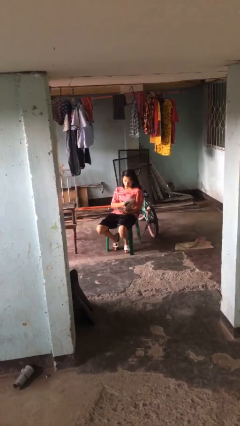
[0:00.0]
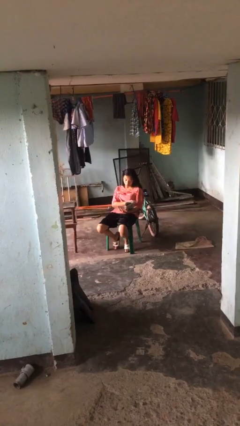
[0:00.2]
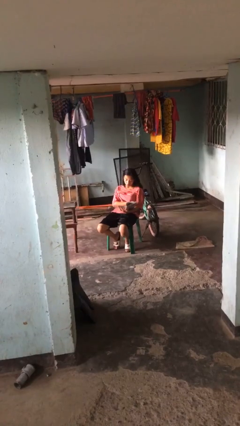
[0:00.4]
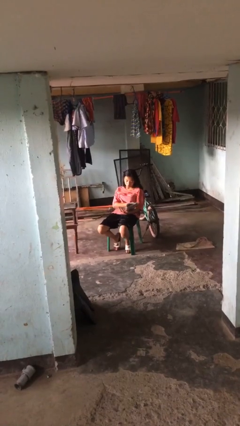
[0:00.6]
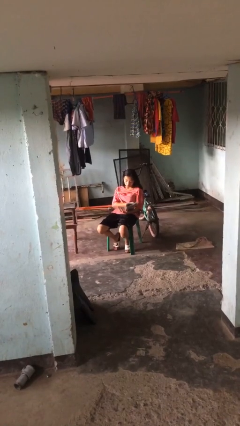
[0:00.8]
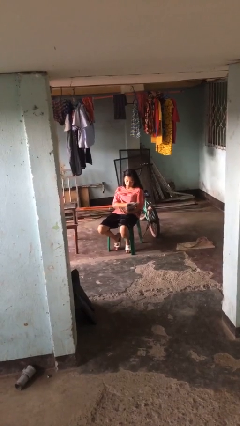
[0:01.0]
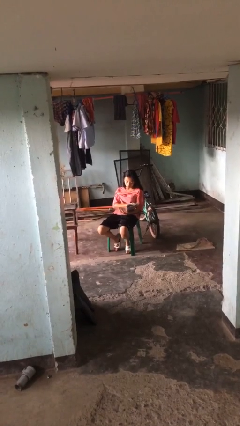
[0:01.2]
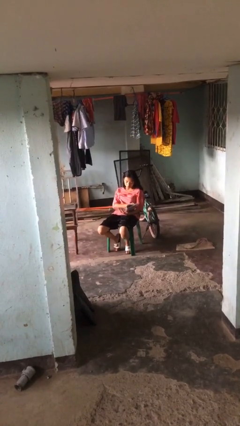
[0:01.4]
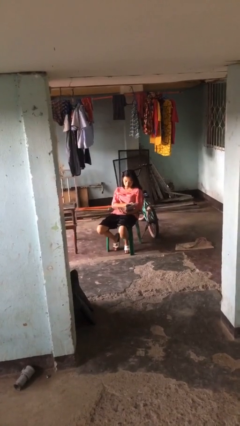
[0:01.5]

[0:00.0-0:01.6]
person reads document

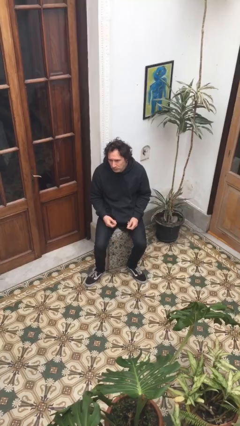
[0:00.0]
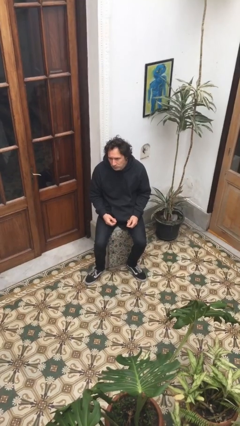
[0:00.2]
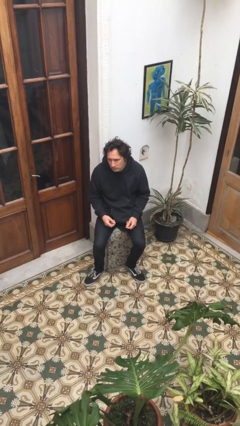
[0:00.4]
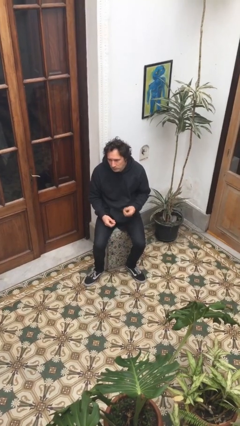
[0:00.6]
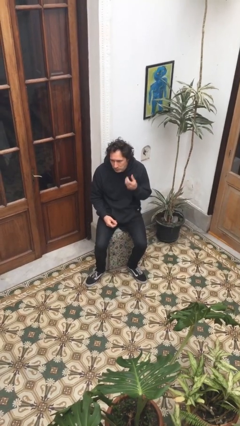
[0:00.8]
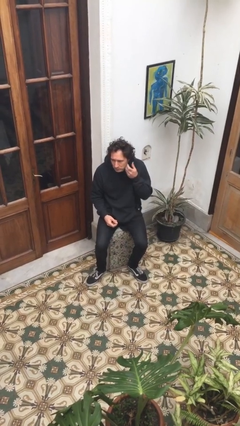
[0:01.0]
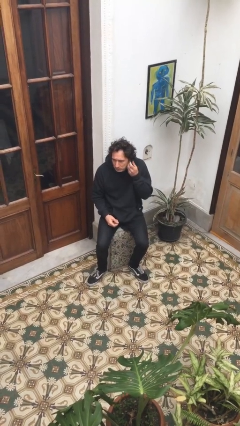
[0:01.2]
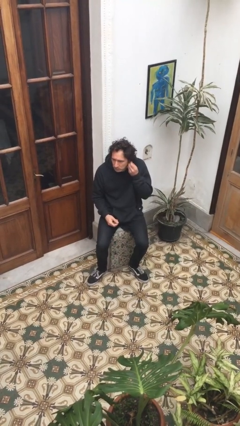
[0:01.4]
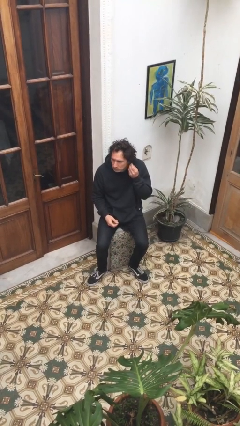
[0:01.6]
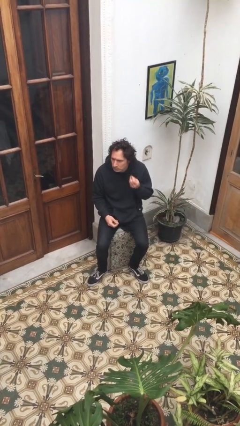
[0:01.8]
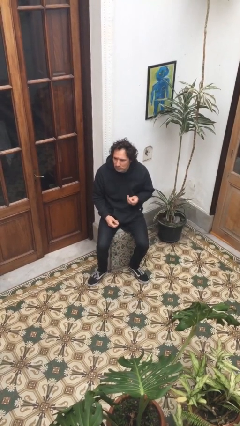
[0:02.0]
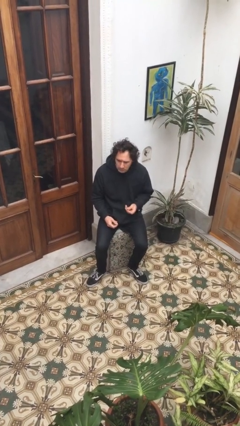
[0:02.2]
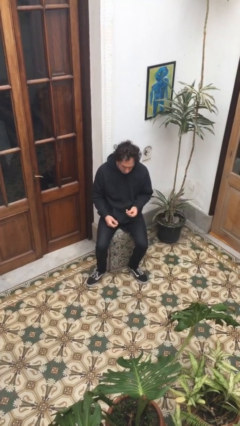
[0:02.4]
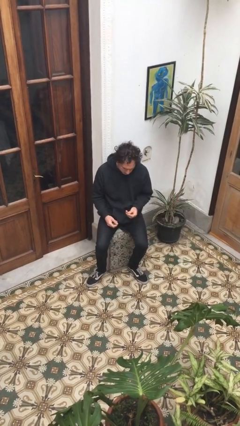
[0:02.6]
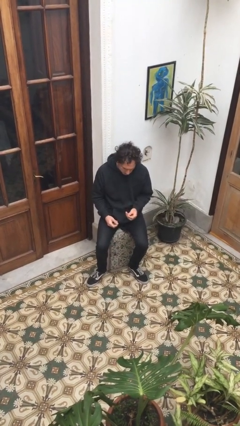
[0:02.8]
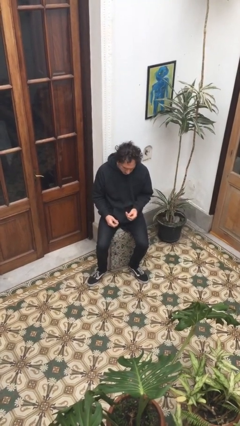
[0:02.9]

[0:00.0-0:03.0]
person takes off earrings

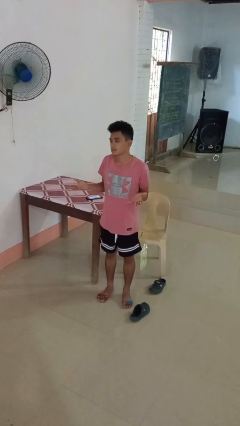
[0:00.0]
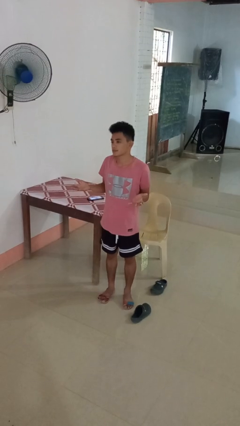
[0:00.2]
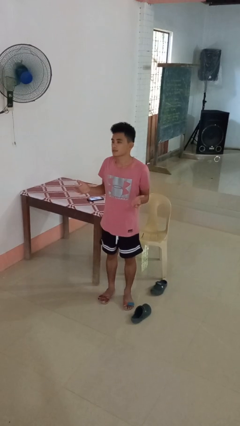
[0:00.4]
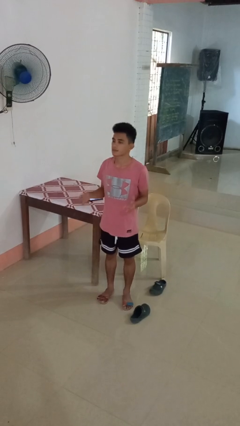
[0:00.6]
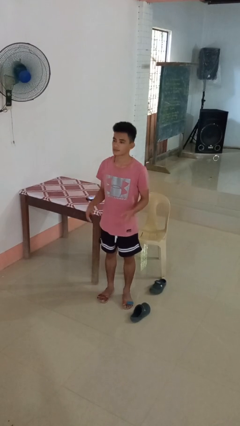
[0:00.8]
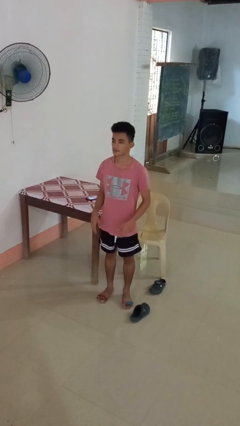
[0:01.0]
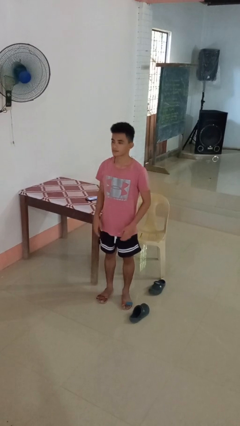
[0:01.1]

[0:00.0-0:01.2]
person shrugs

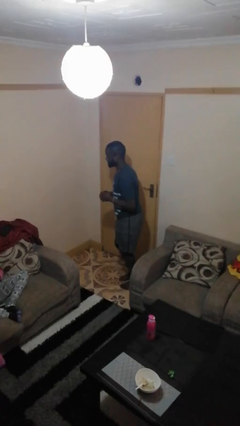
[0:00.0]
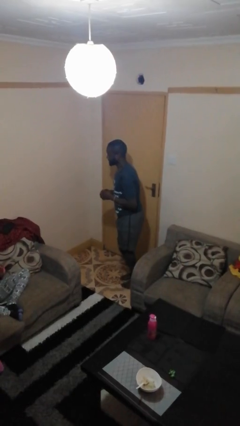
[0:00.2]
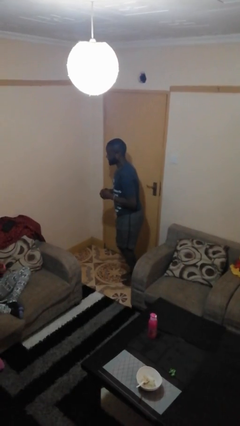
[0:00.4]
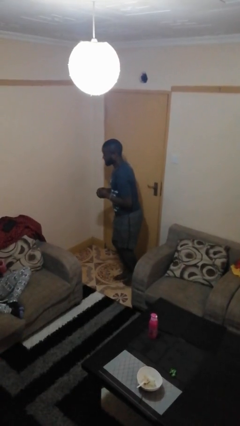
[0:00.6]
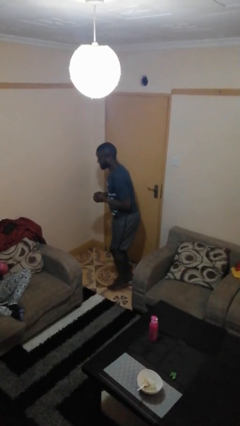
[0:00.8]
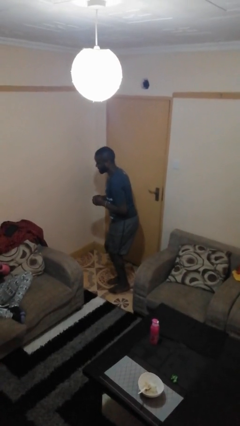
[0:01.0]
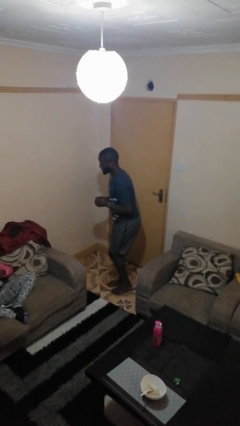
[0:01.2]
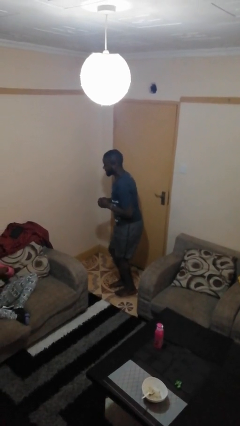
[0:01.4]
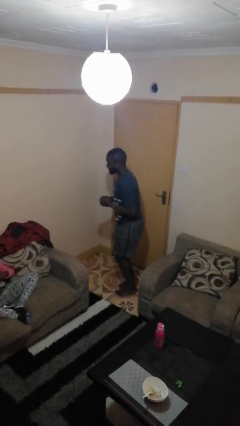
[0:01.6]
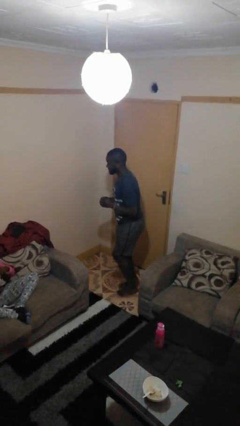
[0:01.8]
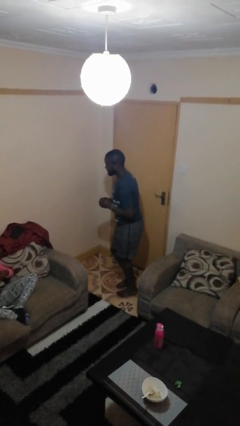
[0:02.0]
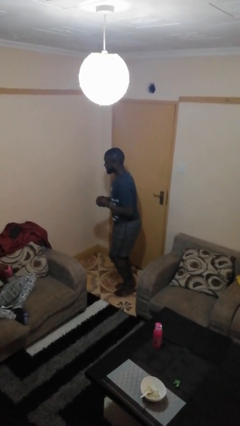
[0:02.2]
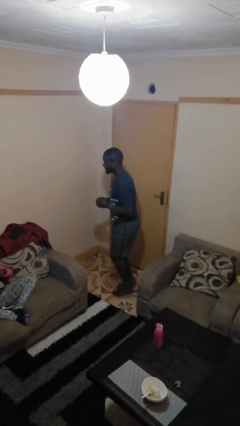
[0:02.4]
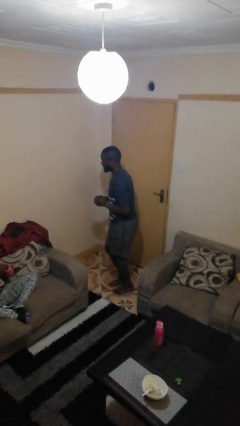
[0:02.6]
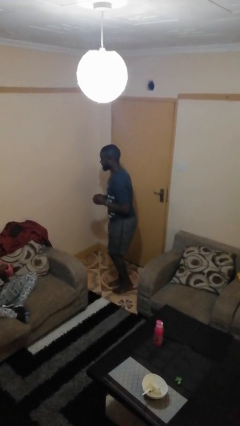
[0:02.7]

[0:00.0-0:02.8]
person walks tiptoe

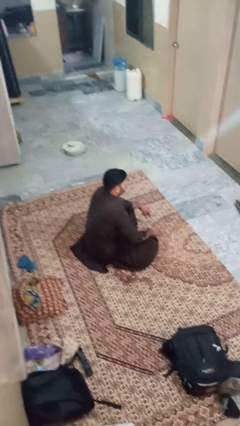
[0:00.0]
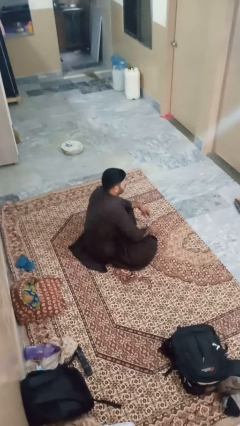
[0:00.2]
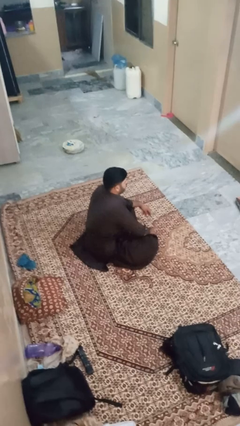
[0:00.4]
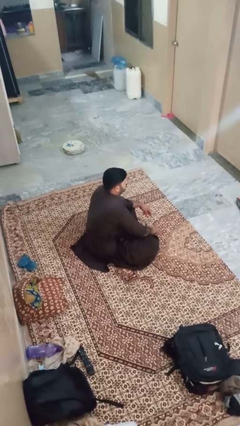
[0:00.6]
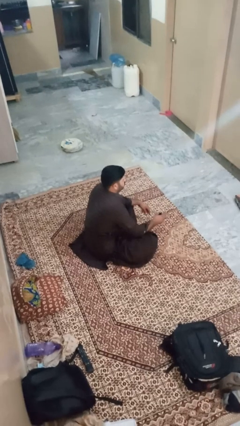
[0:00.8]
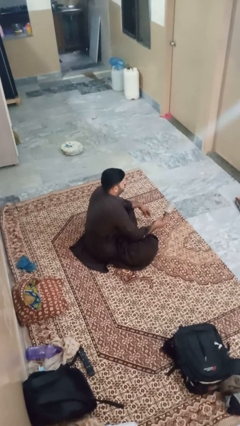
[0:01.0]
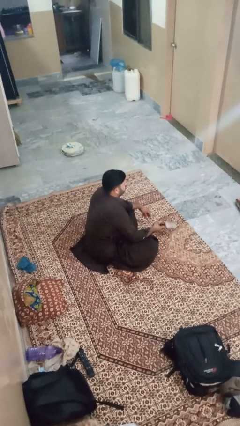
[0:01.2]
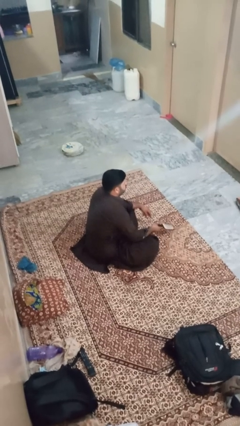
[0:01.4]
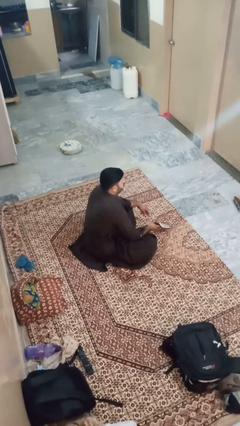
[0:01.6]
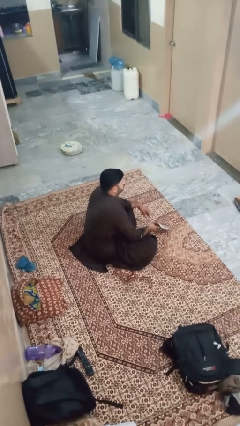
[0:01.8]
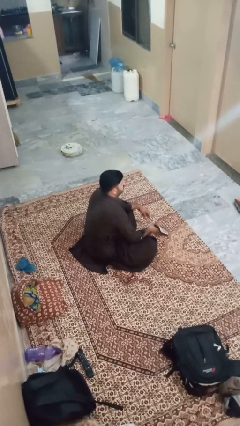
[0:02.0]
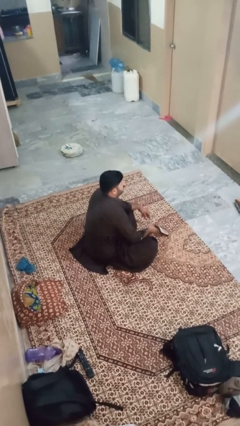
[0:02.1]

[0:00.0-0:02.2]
person picks up object from floor

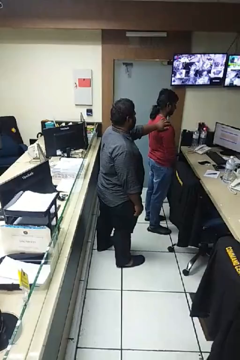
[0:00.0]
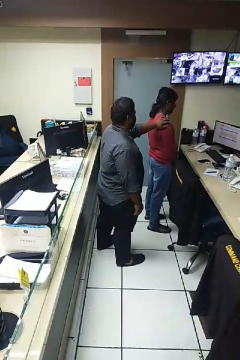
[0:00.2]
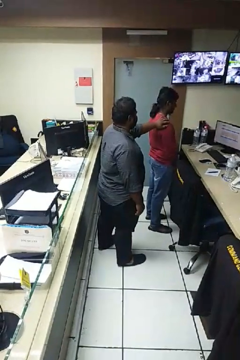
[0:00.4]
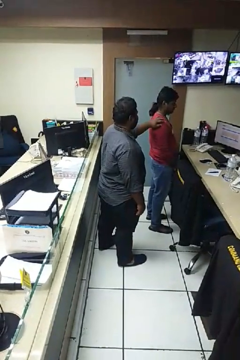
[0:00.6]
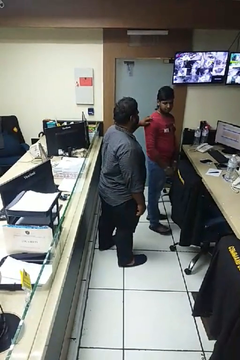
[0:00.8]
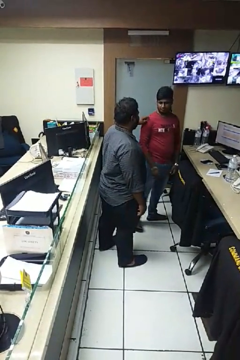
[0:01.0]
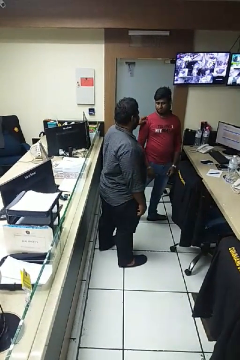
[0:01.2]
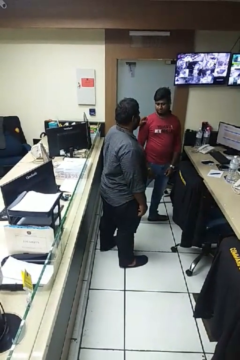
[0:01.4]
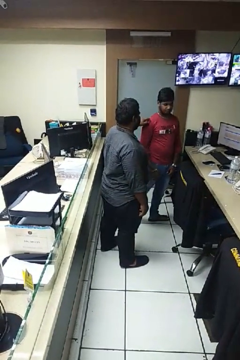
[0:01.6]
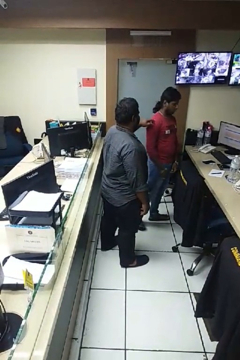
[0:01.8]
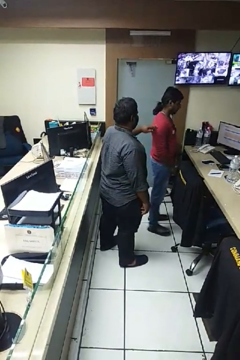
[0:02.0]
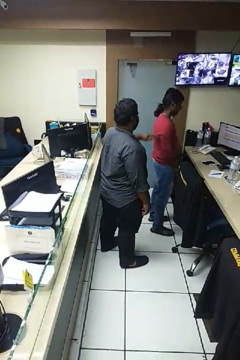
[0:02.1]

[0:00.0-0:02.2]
person spins person around

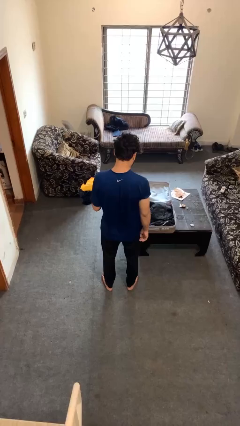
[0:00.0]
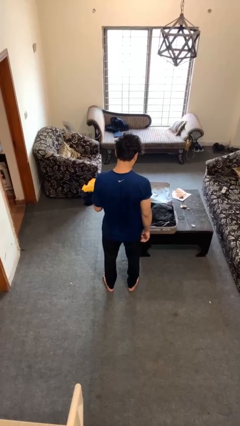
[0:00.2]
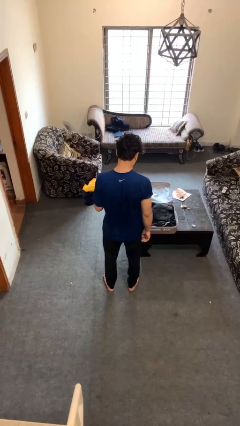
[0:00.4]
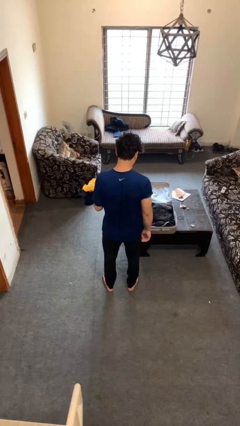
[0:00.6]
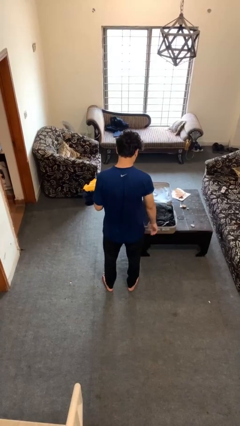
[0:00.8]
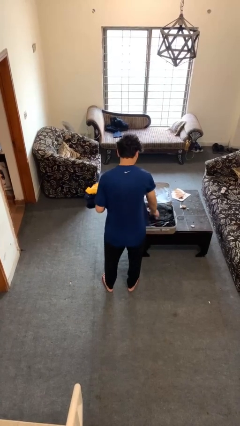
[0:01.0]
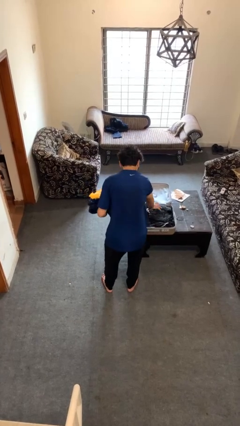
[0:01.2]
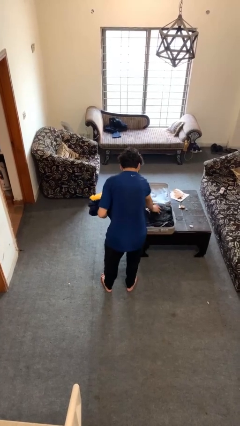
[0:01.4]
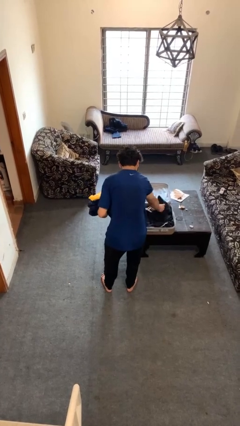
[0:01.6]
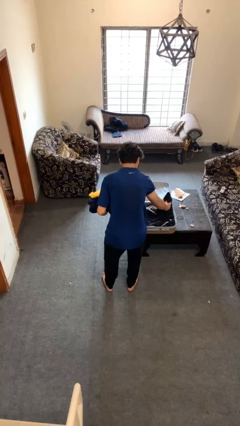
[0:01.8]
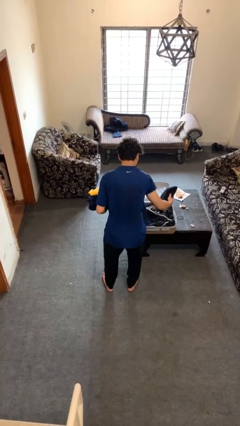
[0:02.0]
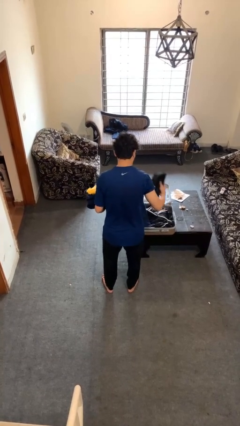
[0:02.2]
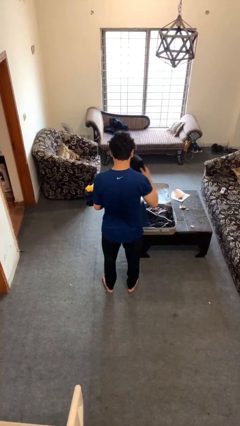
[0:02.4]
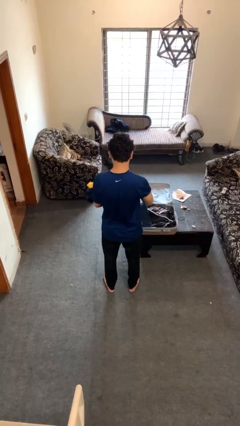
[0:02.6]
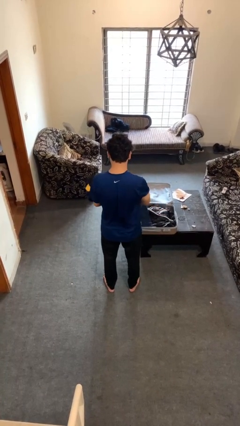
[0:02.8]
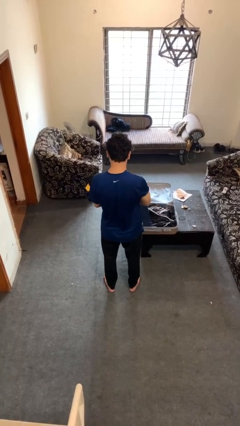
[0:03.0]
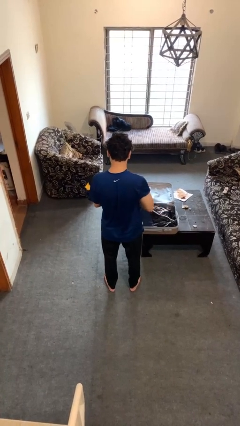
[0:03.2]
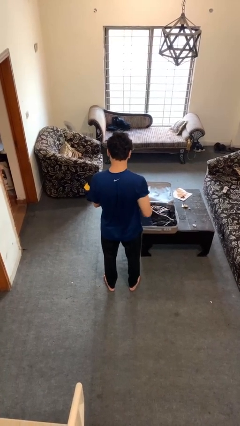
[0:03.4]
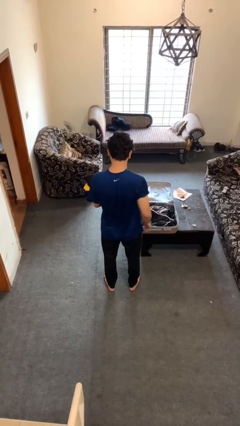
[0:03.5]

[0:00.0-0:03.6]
person unloads clothes from suitcase

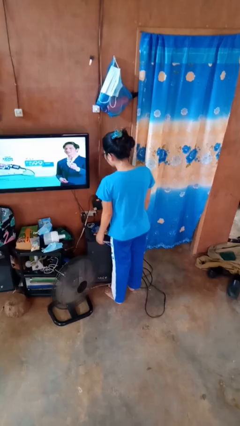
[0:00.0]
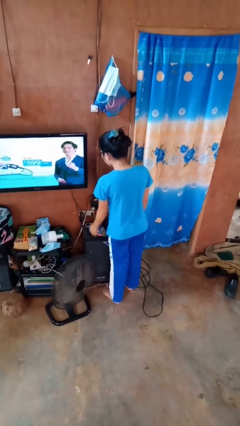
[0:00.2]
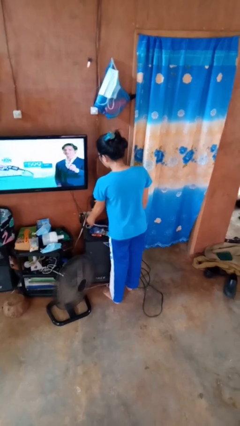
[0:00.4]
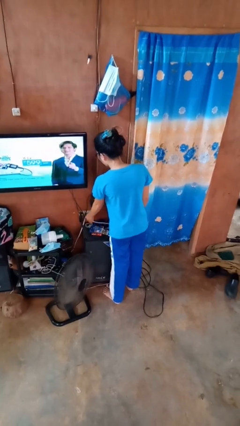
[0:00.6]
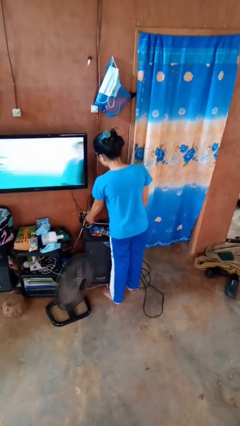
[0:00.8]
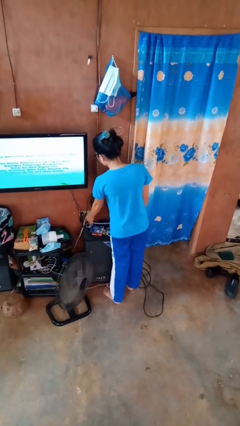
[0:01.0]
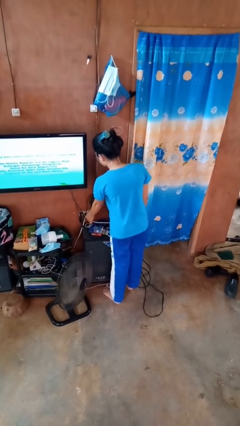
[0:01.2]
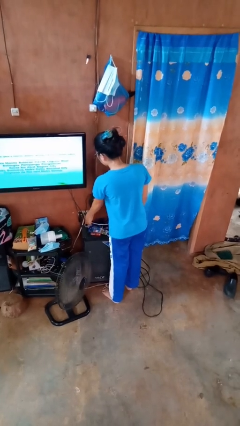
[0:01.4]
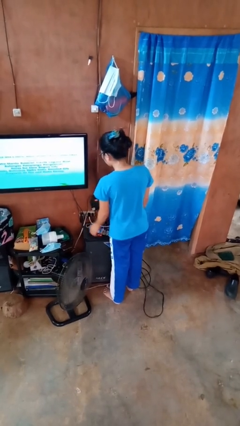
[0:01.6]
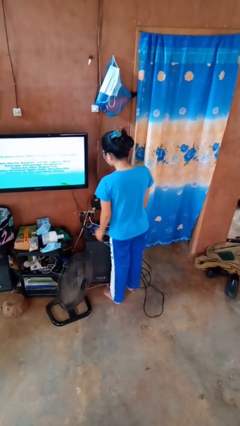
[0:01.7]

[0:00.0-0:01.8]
person plugs into electrical socket
